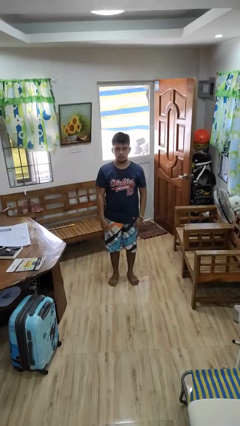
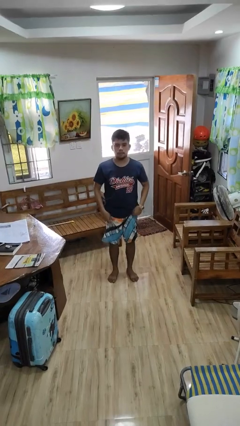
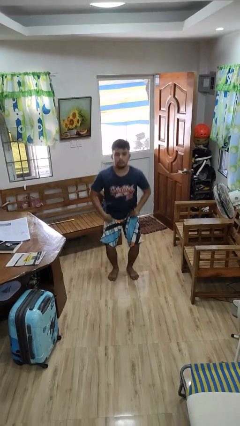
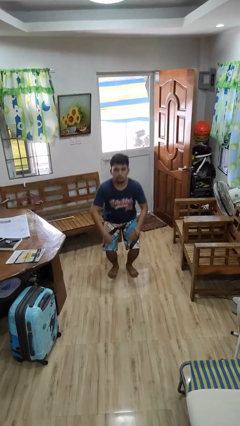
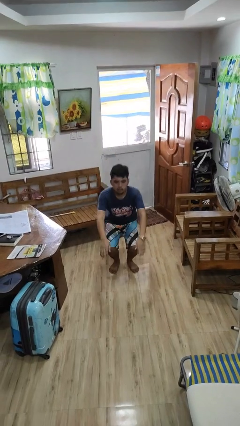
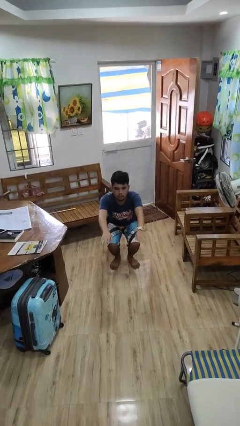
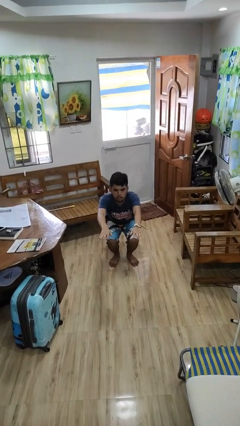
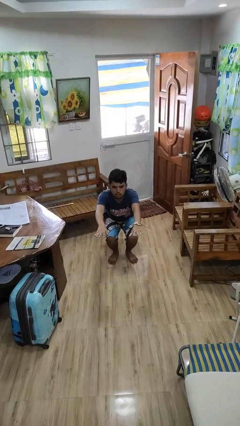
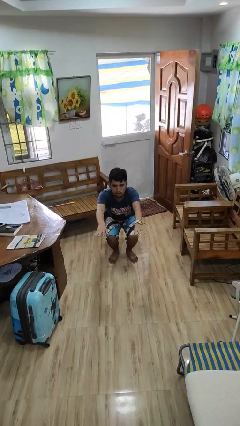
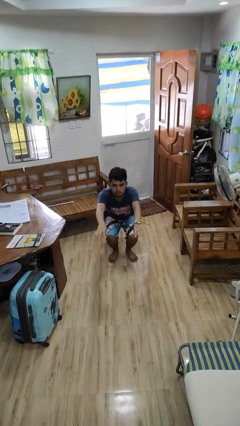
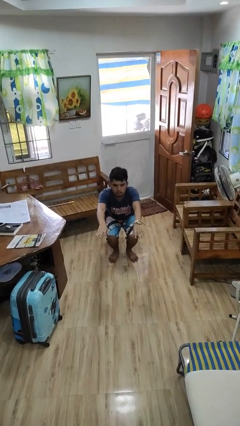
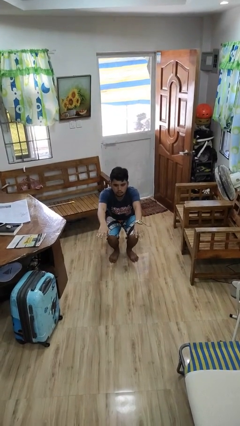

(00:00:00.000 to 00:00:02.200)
person squats

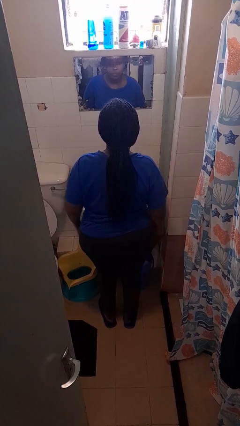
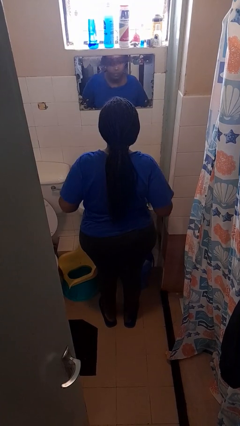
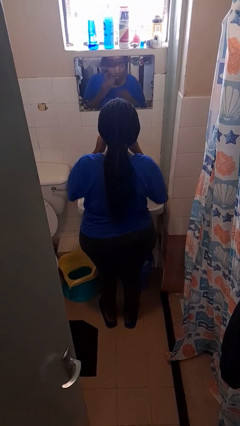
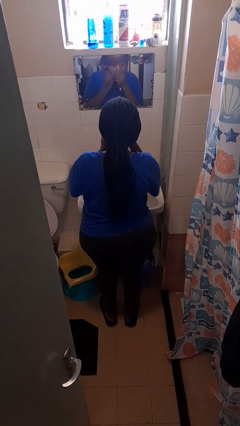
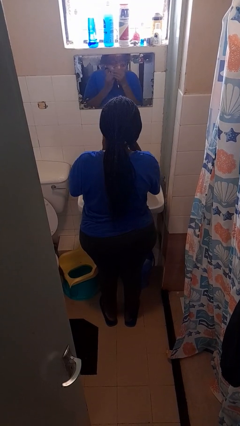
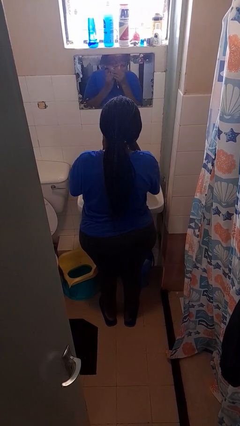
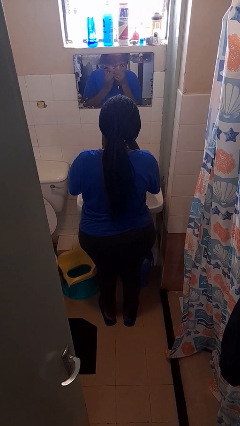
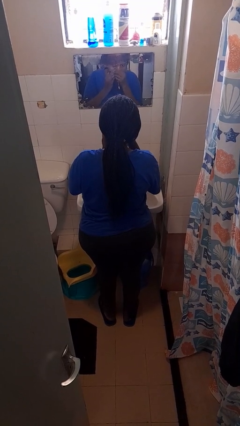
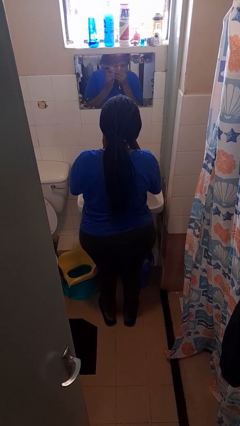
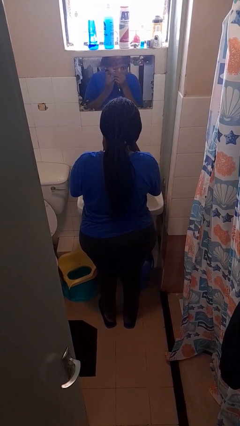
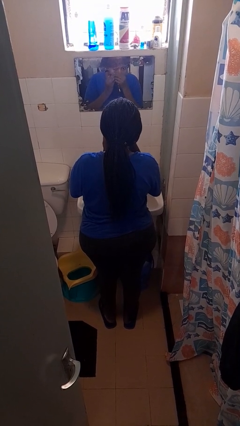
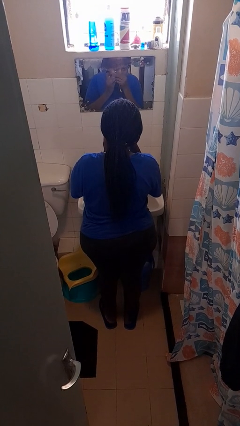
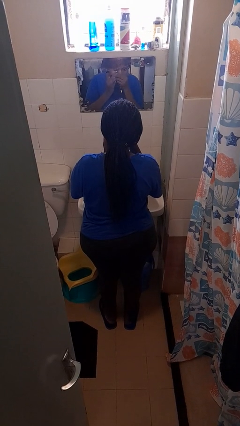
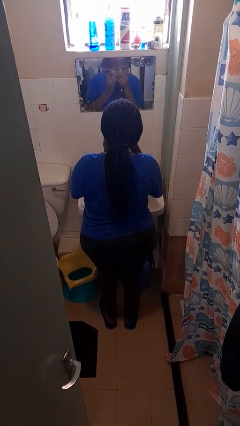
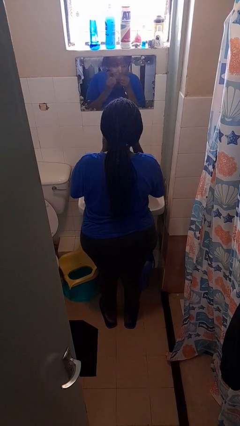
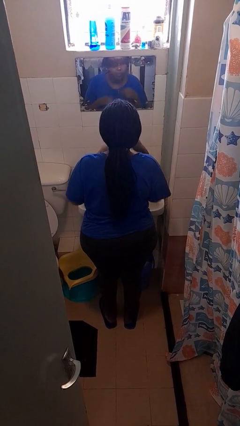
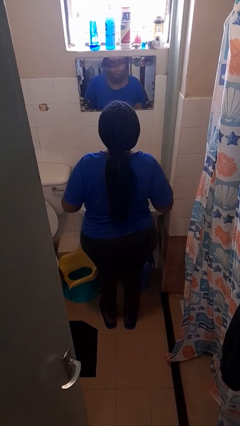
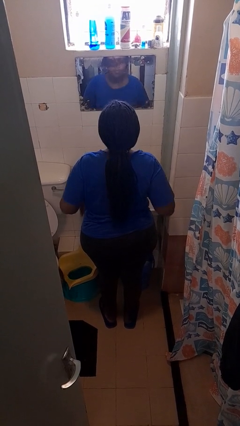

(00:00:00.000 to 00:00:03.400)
person applies eye makeup

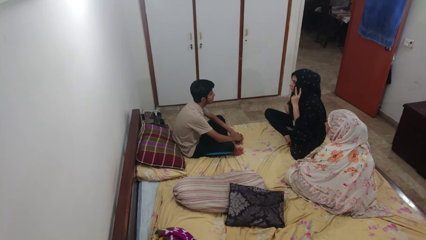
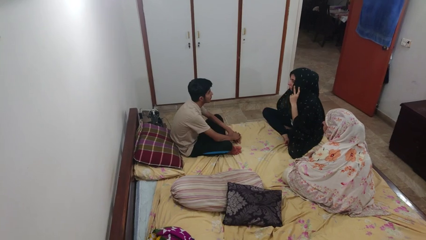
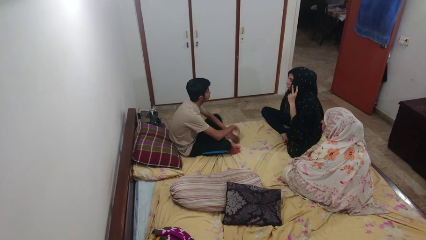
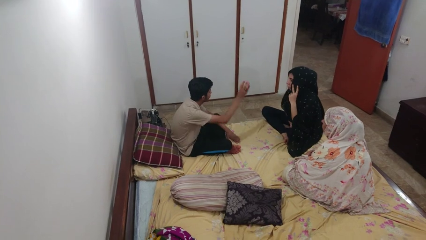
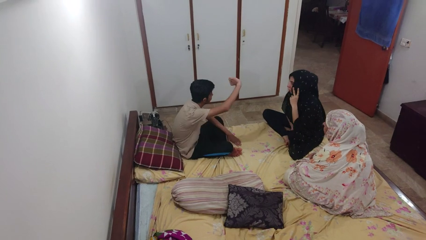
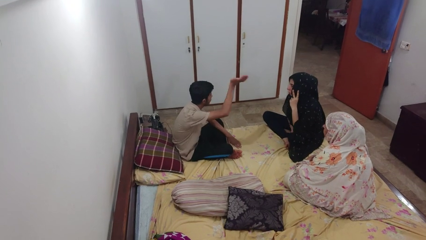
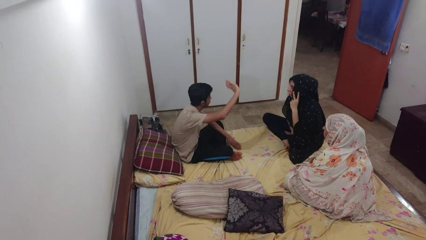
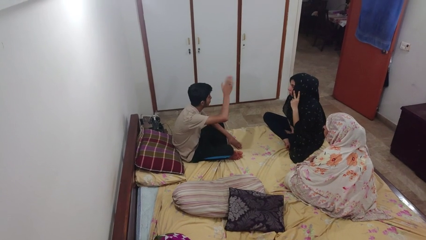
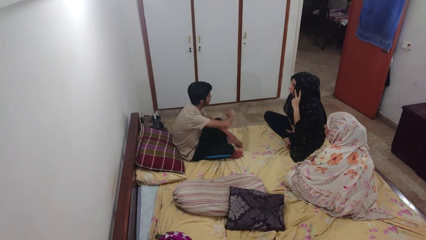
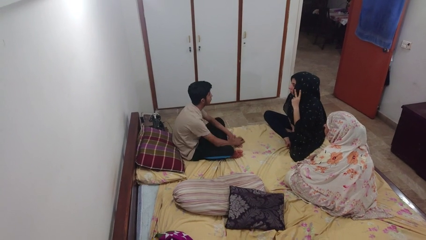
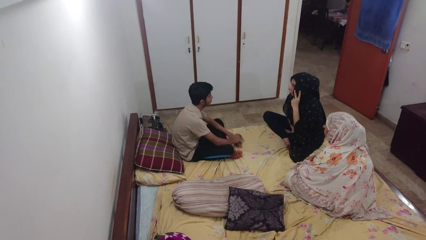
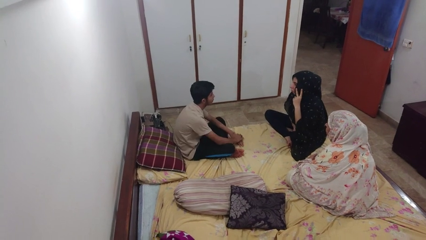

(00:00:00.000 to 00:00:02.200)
person waves at person

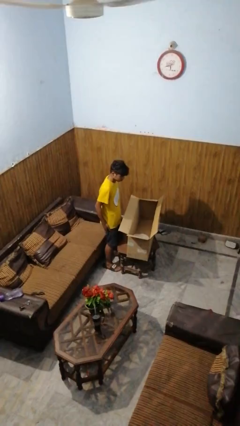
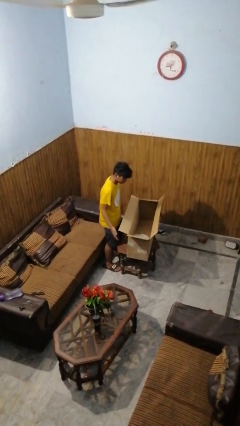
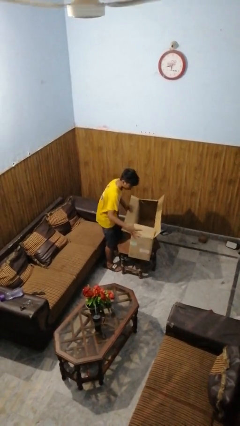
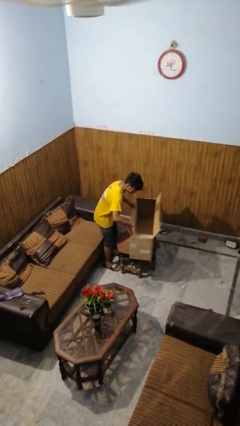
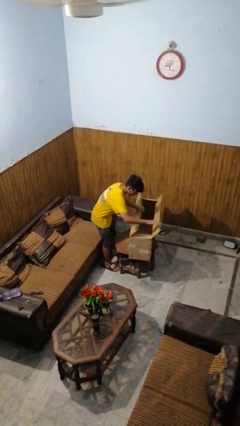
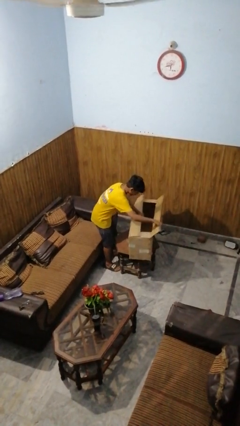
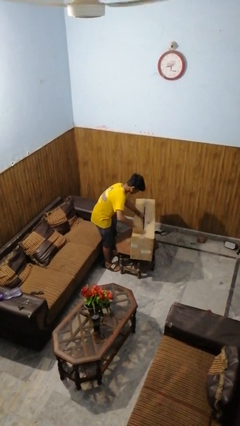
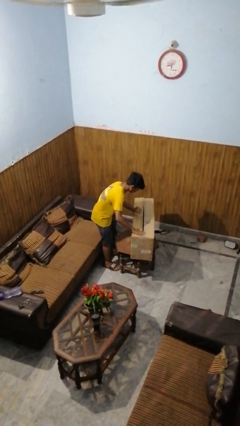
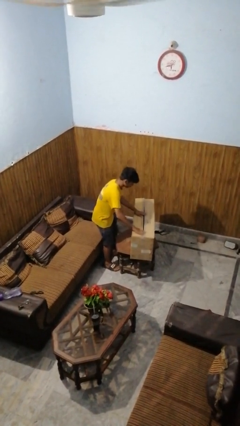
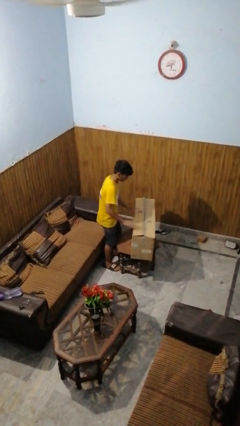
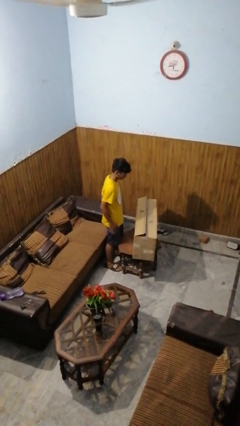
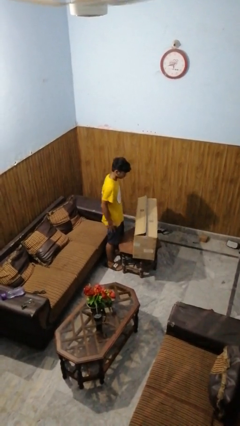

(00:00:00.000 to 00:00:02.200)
person closes box

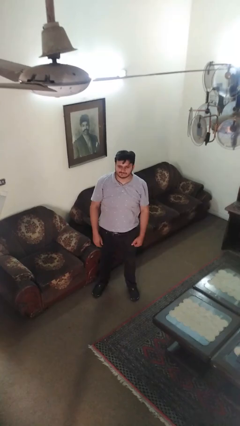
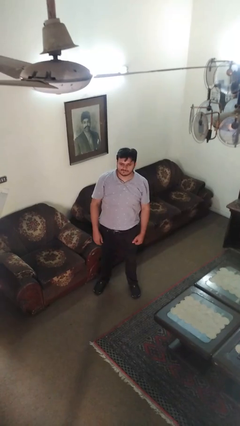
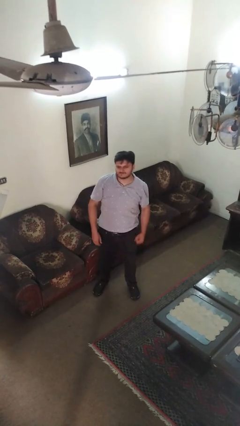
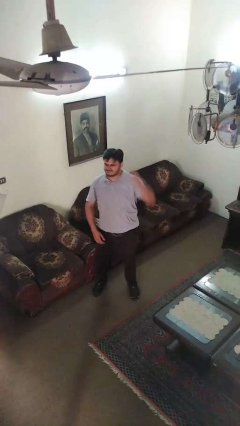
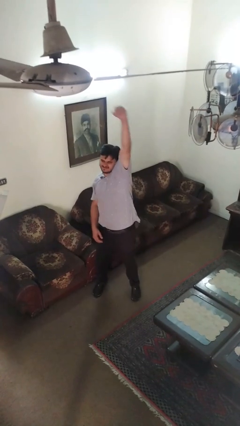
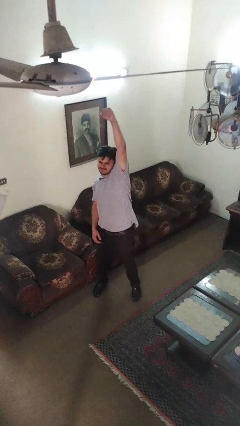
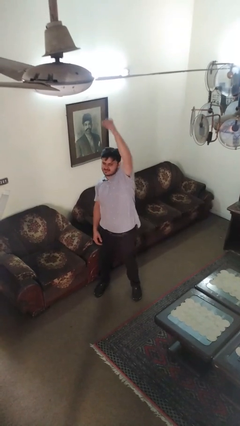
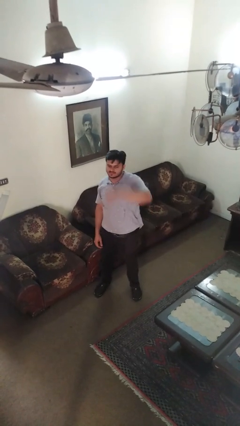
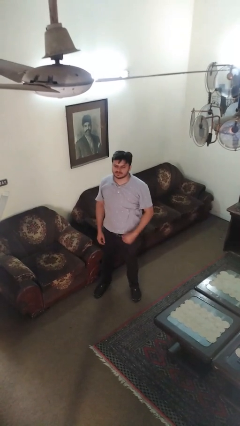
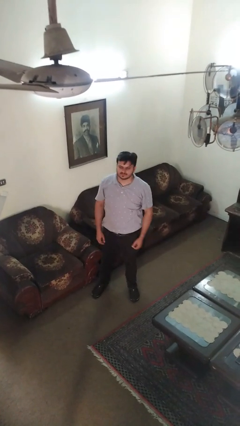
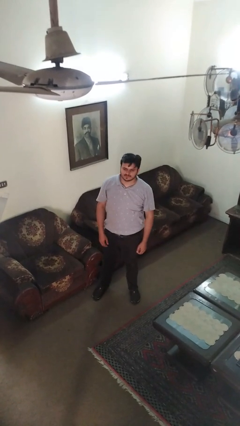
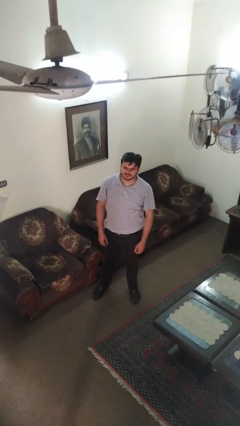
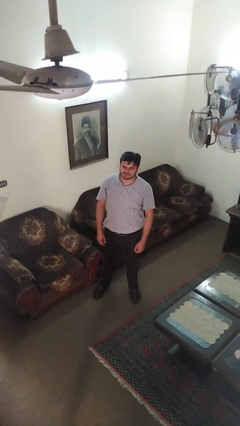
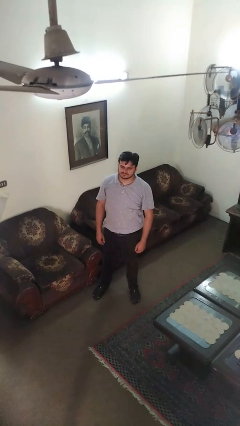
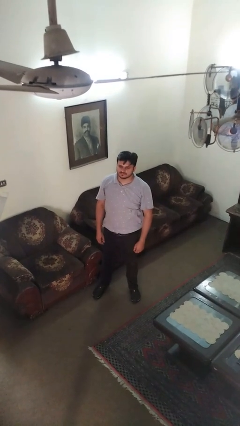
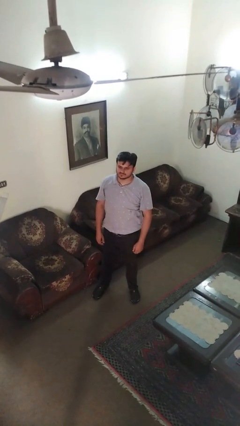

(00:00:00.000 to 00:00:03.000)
person punches

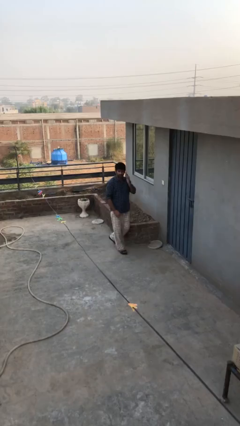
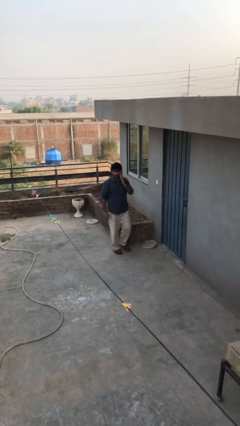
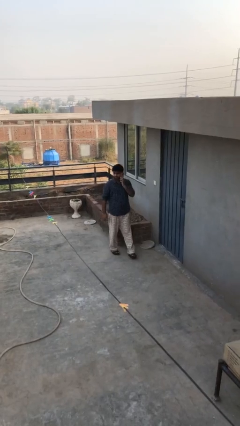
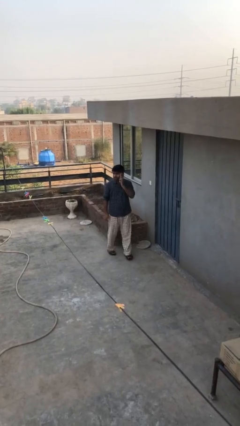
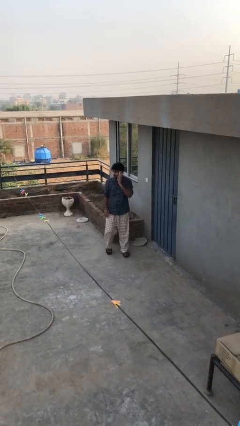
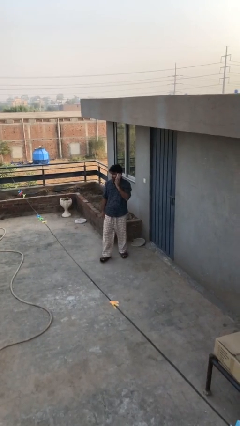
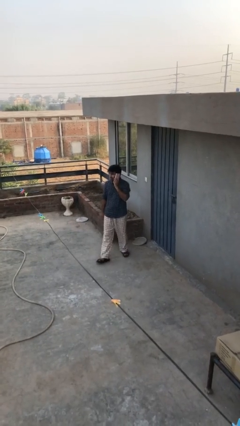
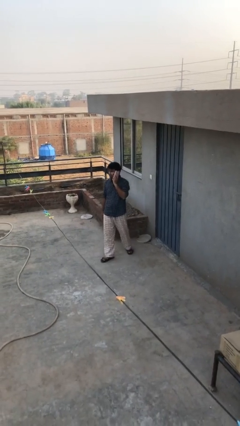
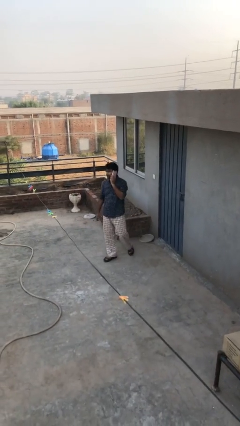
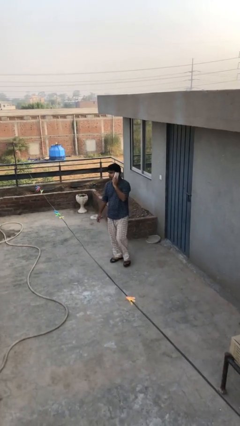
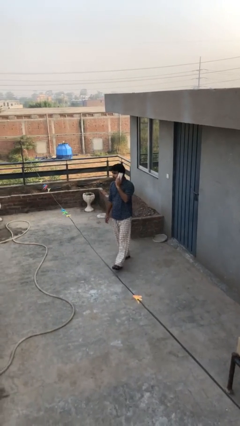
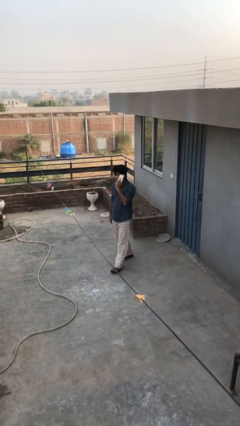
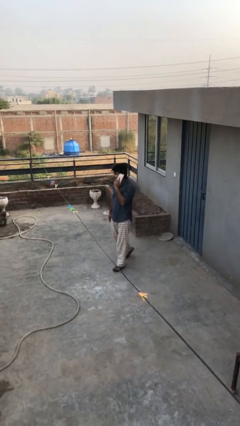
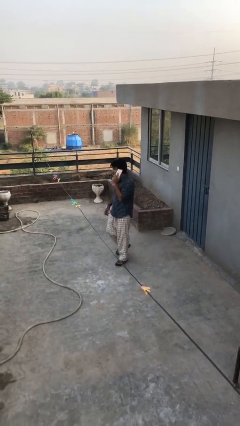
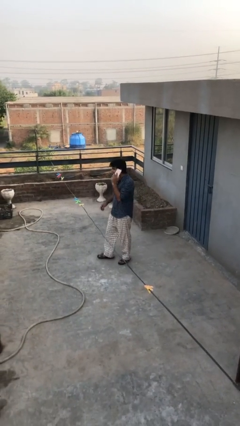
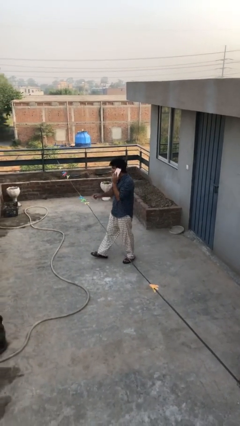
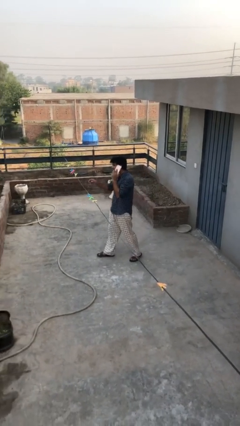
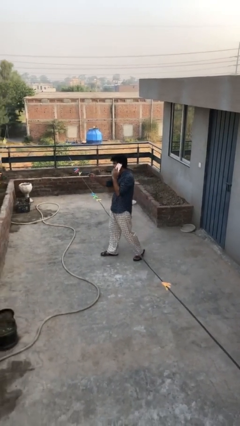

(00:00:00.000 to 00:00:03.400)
person talks on phone

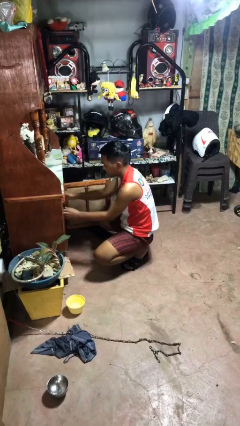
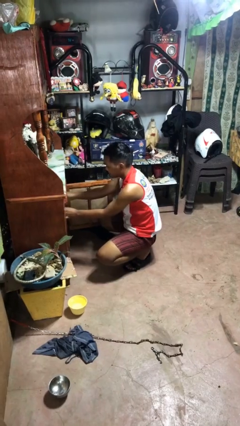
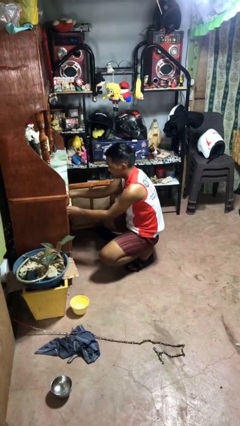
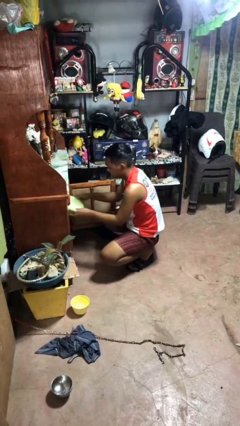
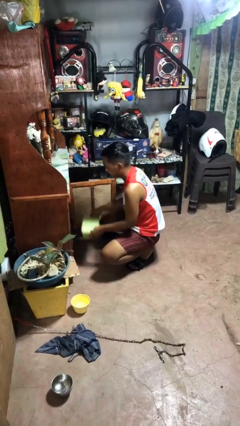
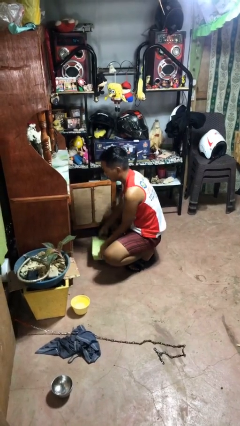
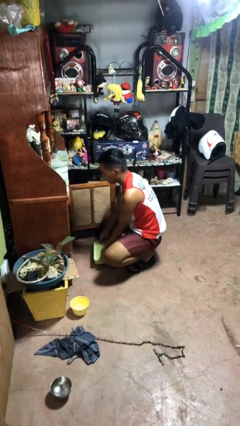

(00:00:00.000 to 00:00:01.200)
person takes object from cabinet
